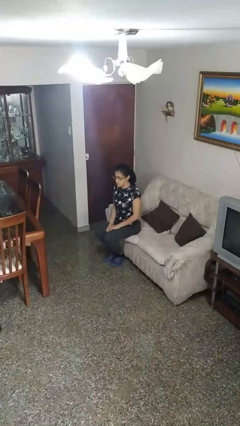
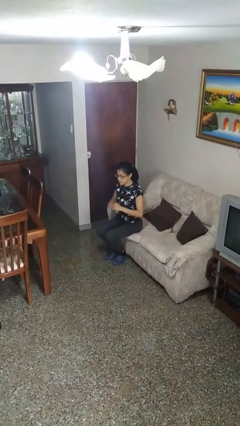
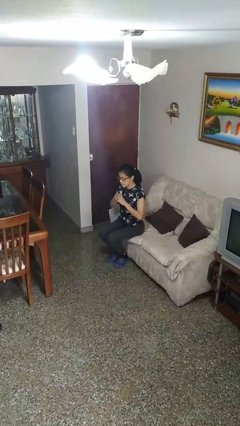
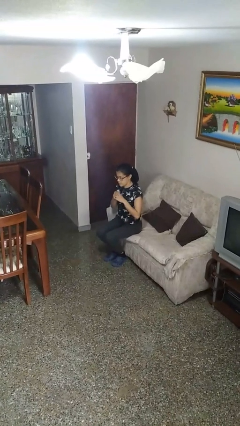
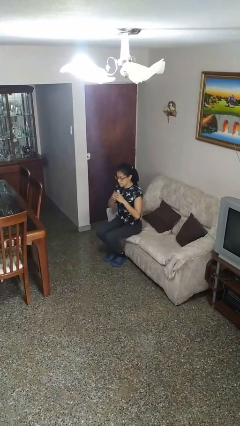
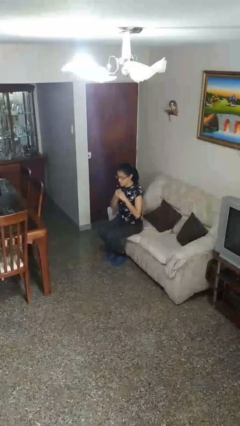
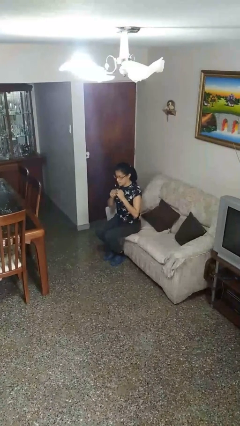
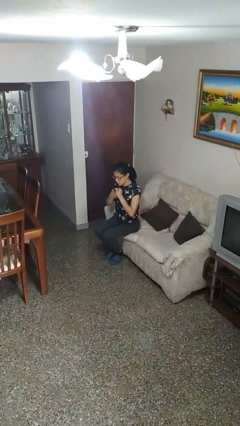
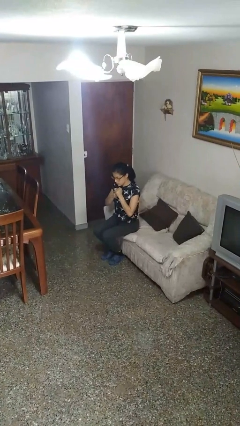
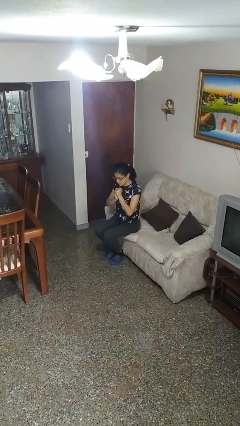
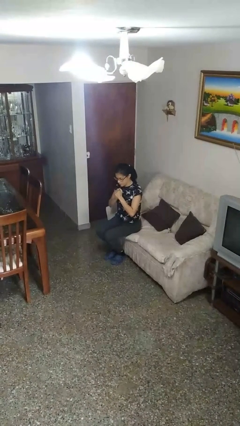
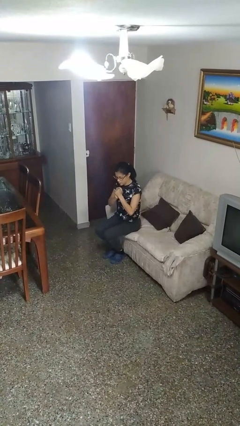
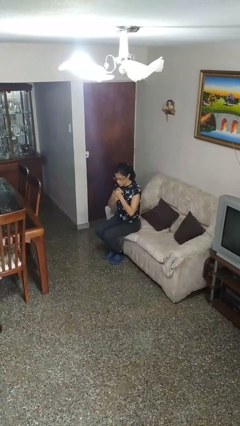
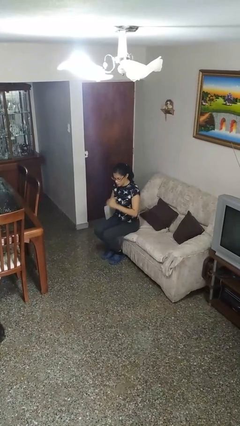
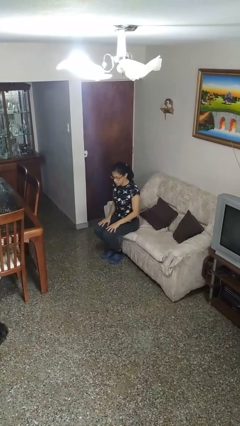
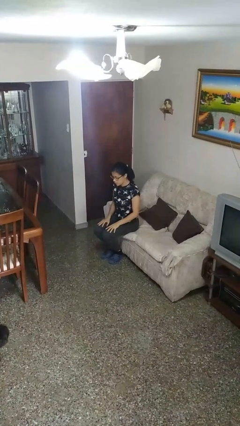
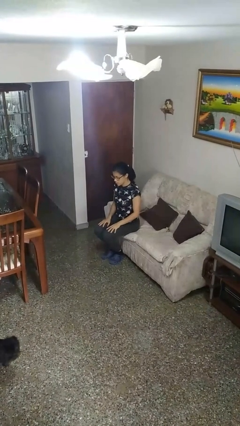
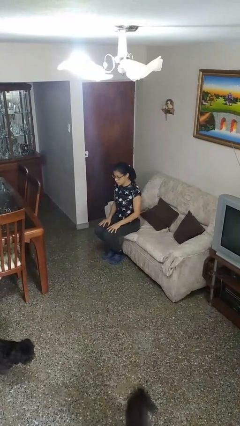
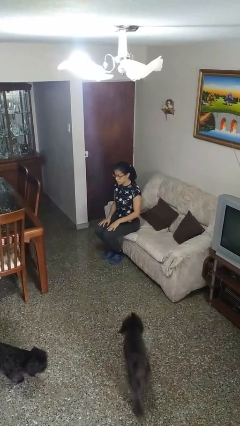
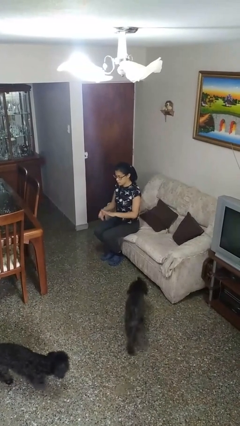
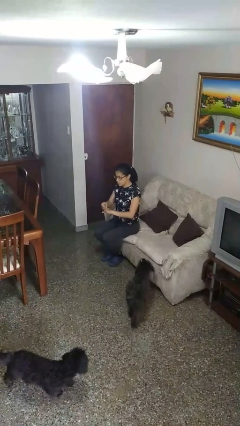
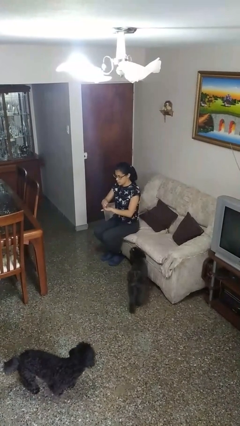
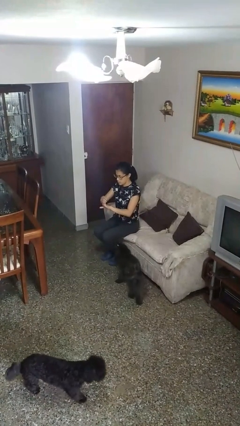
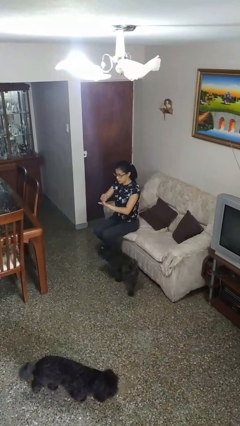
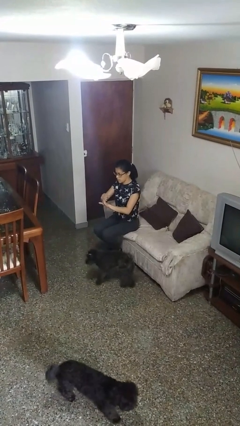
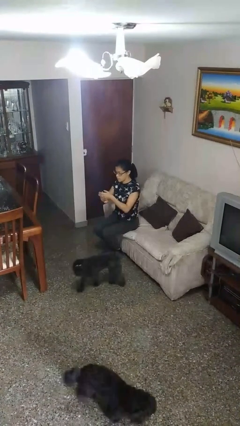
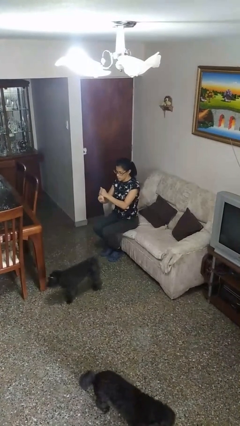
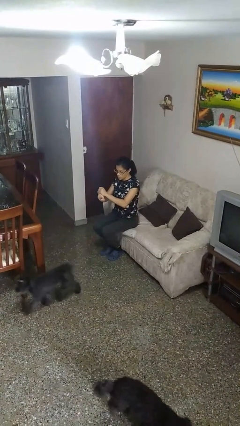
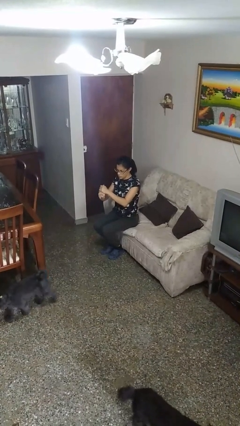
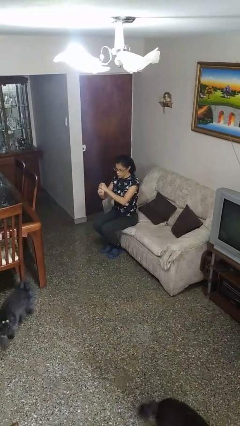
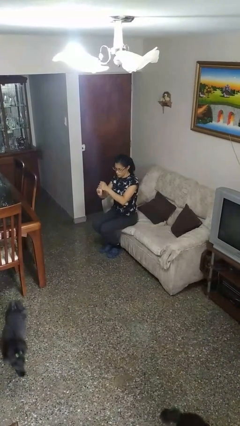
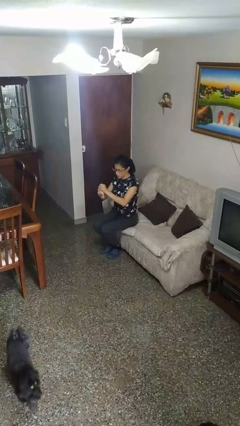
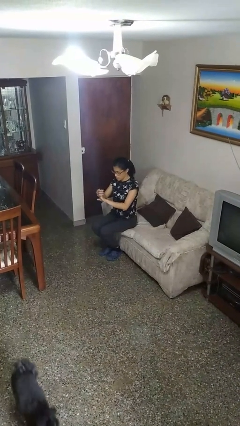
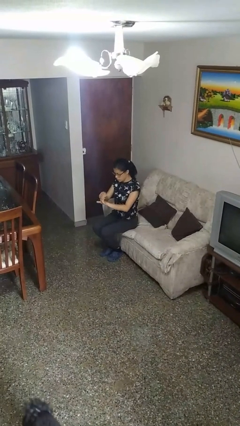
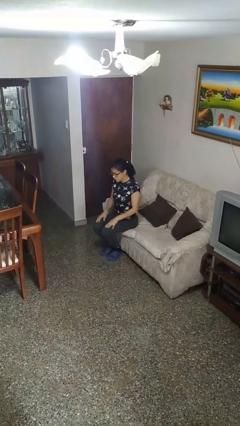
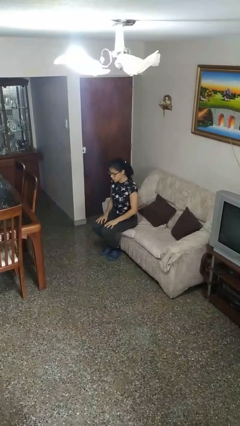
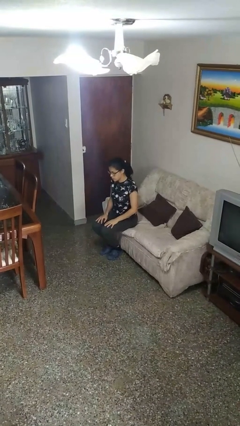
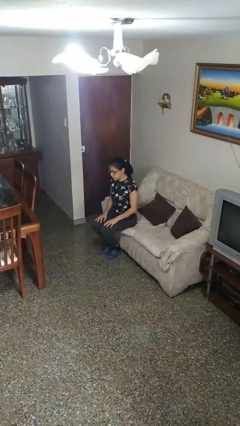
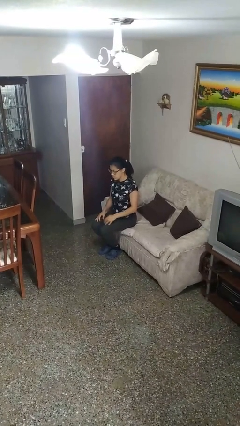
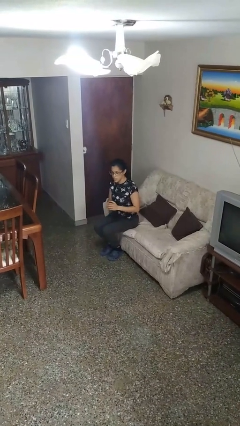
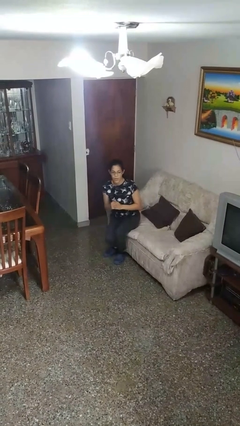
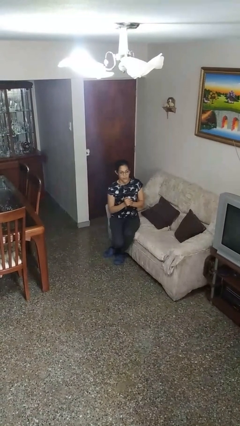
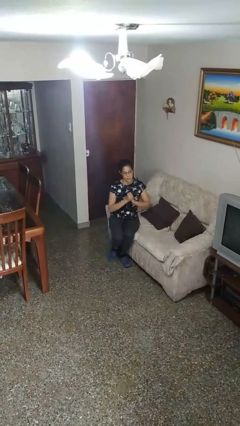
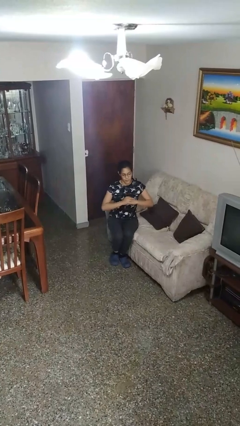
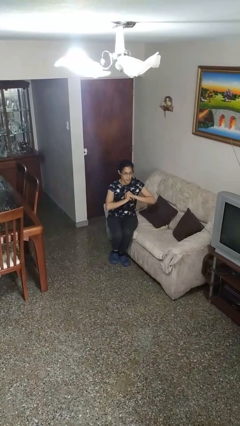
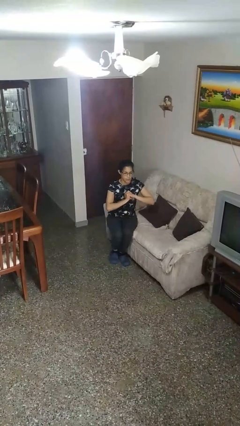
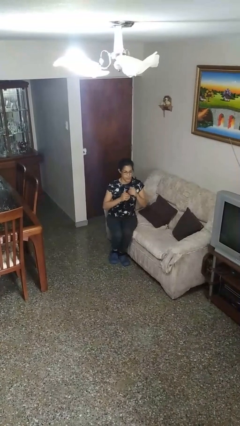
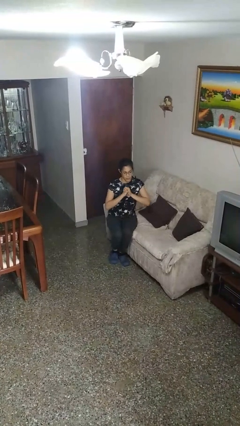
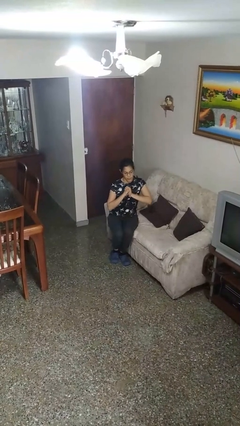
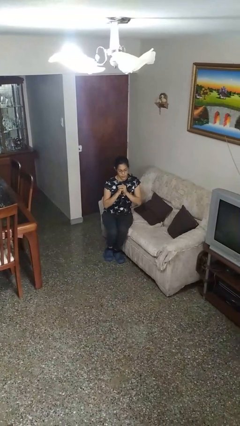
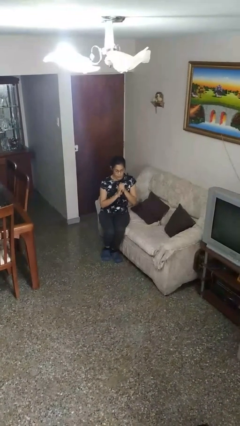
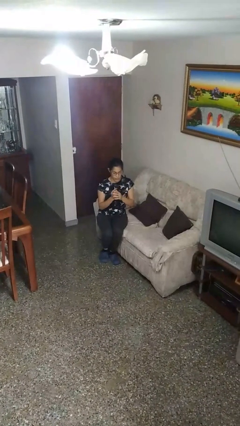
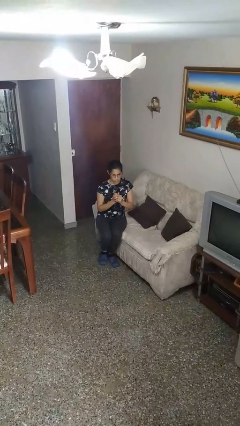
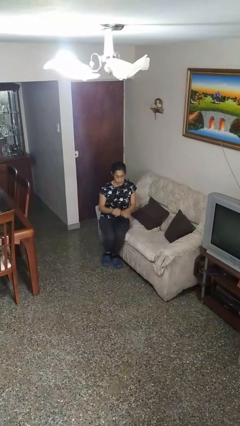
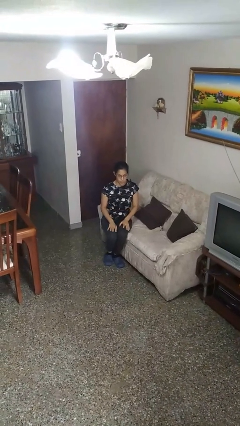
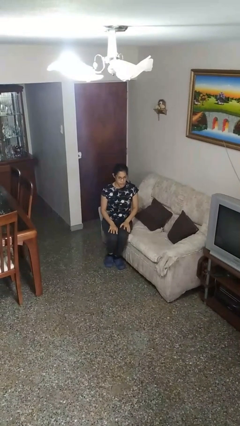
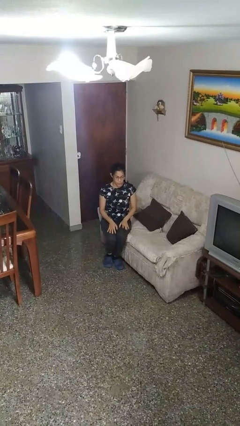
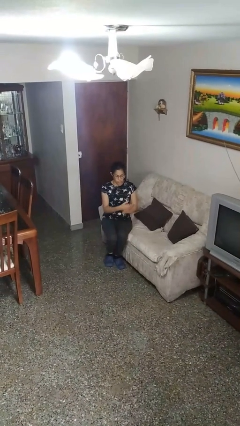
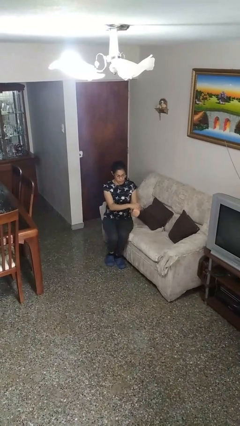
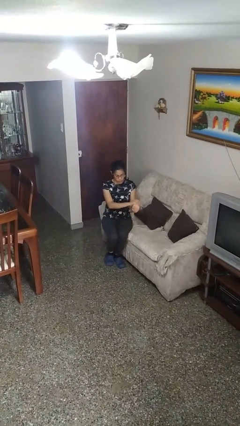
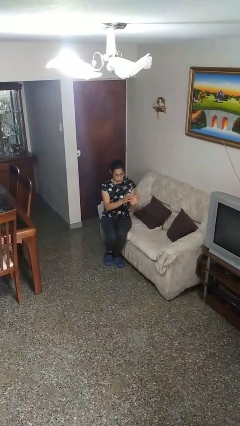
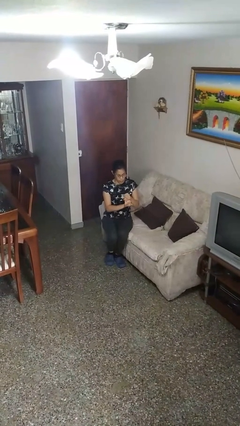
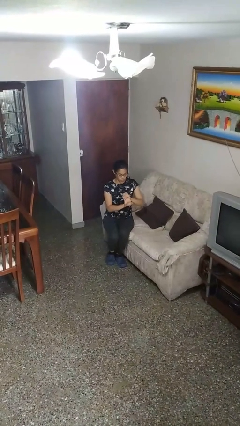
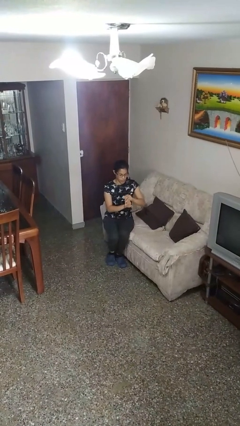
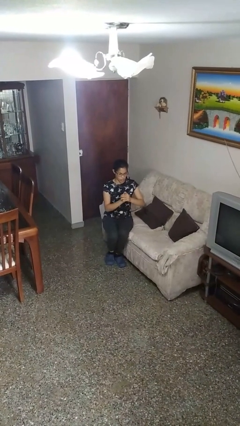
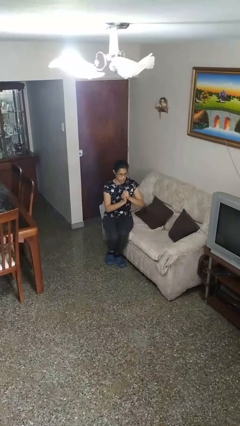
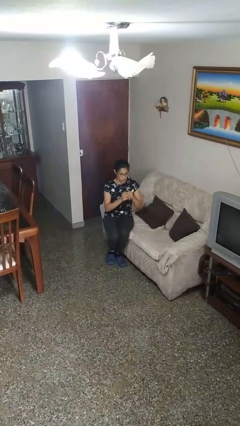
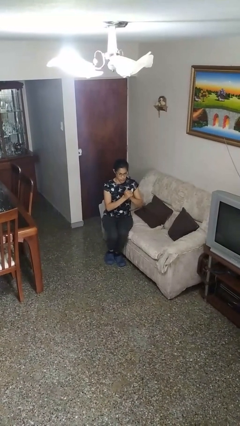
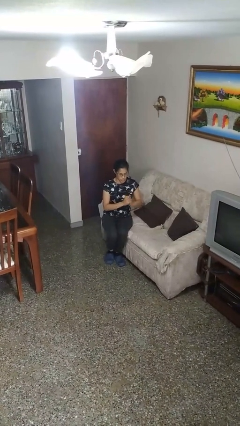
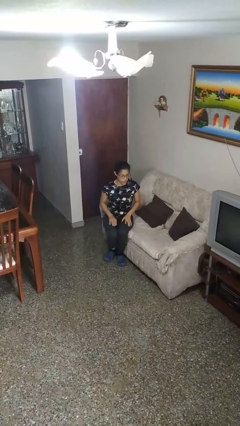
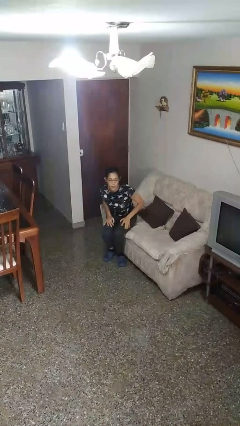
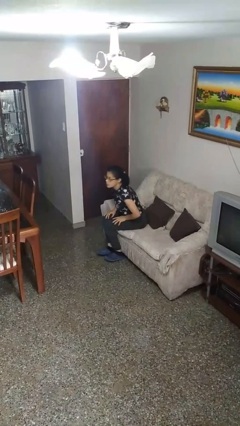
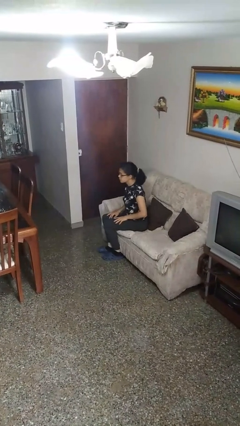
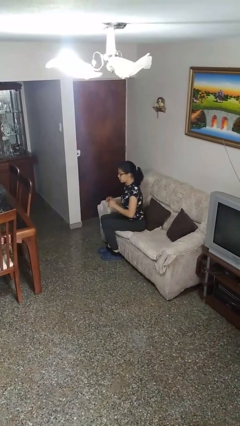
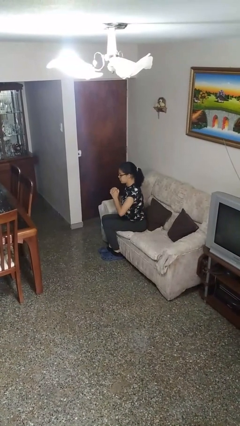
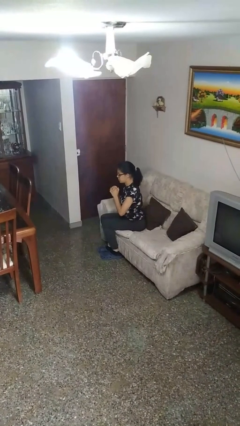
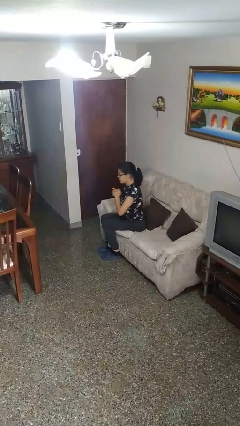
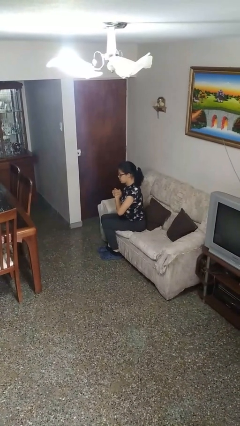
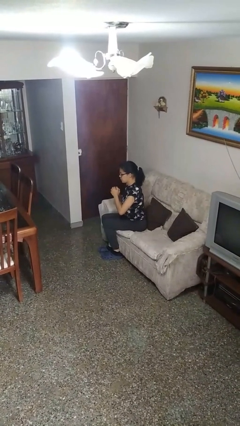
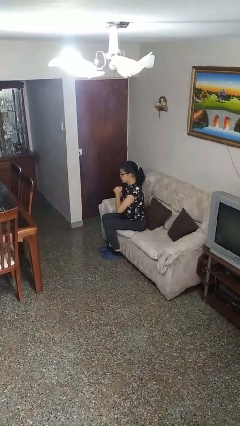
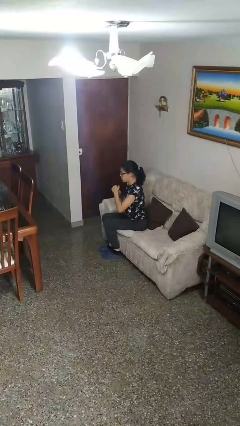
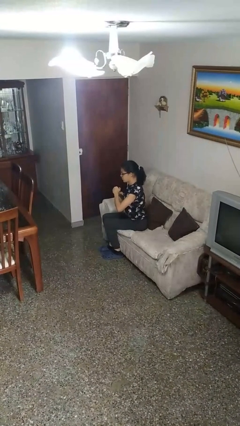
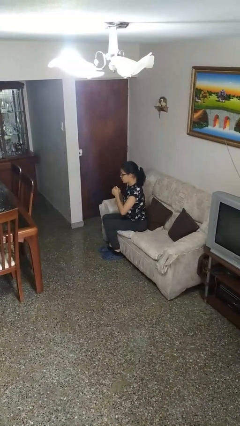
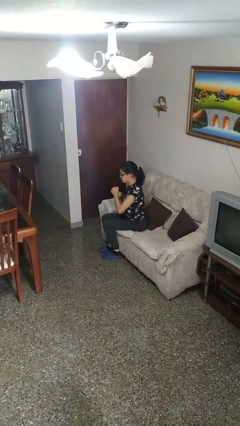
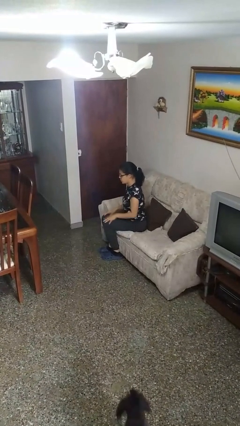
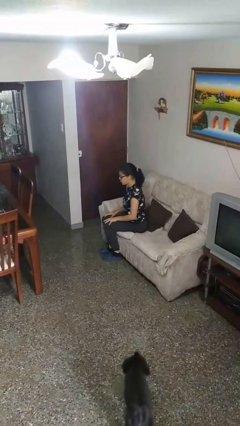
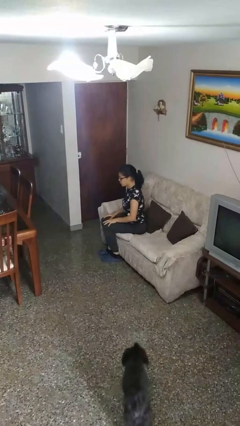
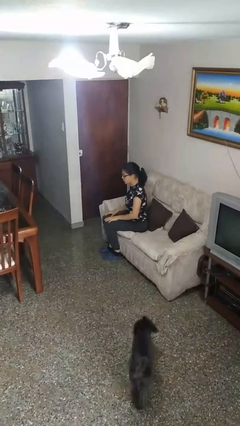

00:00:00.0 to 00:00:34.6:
person cracks knuckles

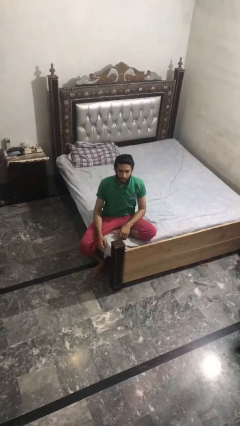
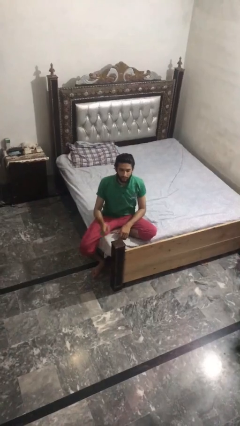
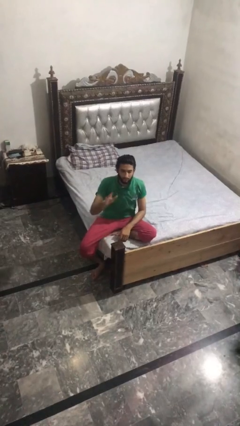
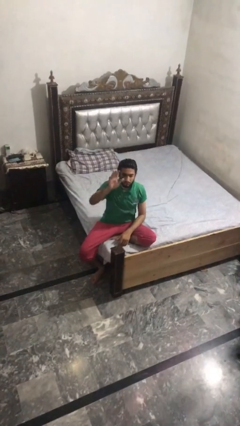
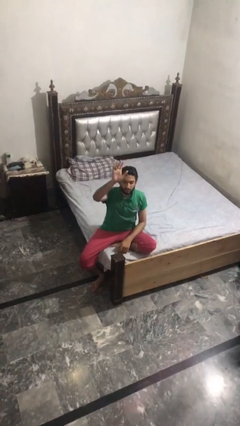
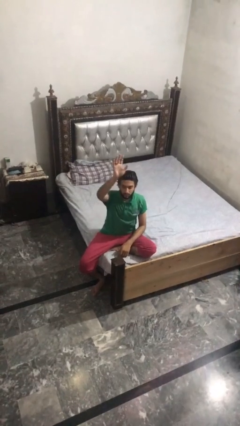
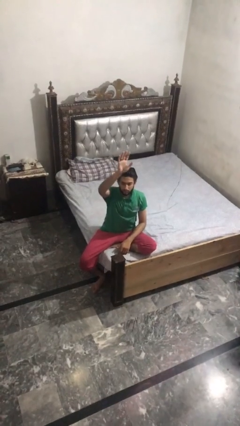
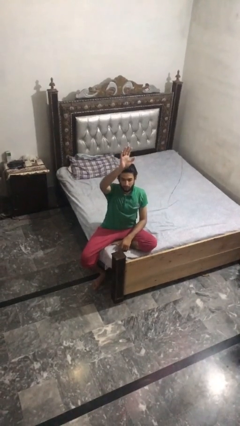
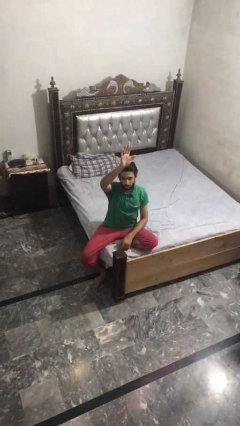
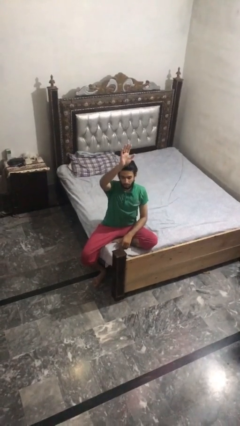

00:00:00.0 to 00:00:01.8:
person gestures raise hand
